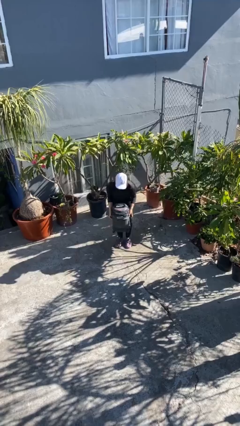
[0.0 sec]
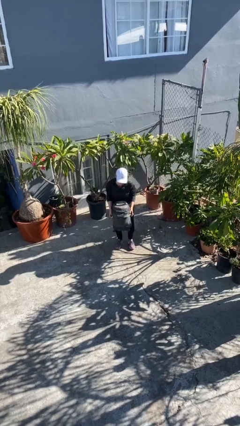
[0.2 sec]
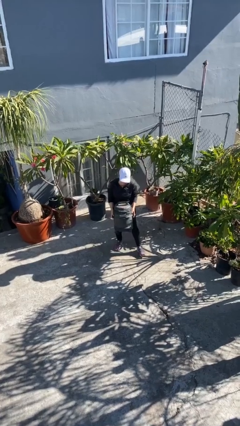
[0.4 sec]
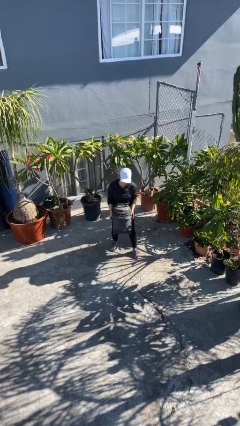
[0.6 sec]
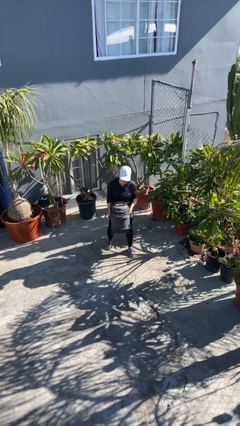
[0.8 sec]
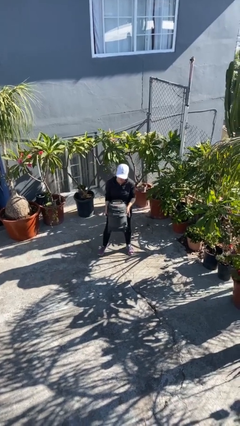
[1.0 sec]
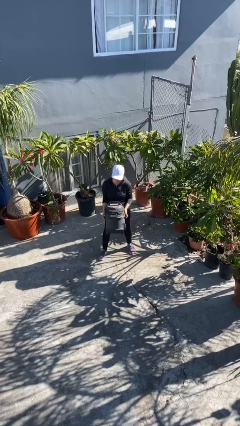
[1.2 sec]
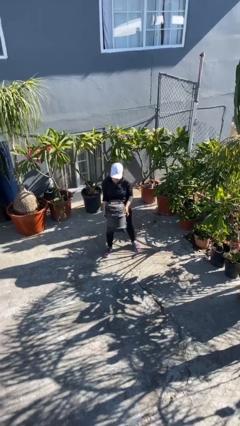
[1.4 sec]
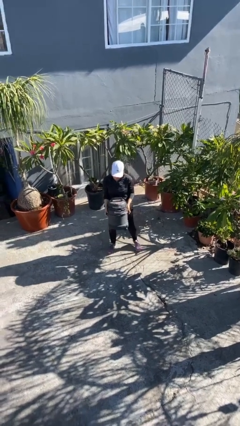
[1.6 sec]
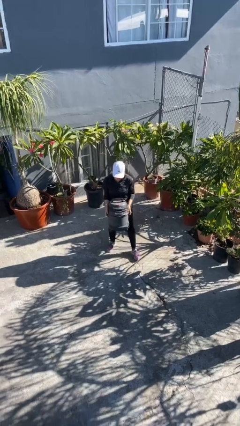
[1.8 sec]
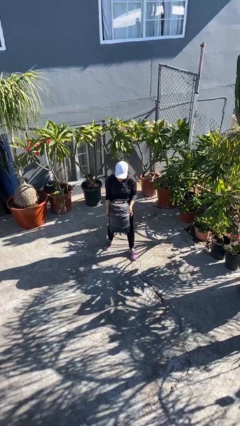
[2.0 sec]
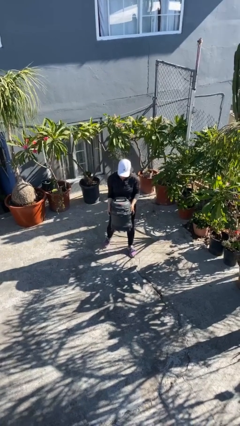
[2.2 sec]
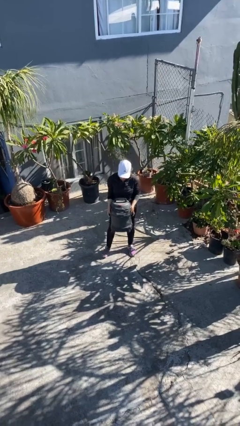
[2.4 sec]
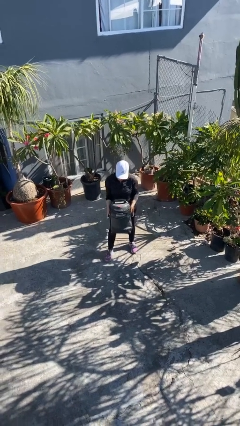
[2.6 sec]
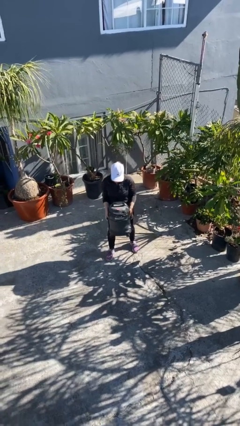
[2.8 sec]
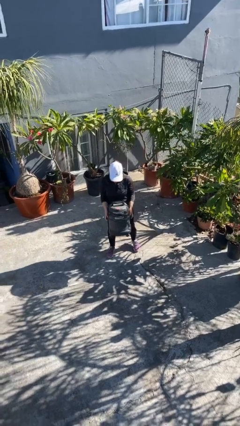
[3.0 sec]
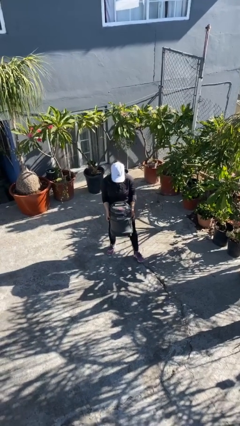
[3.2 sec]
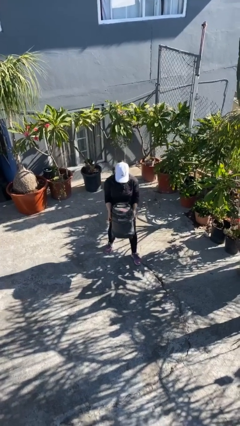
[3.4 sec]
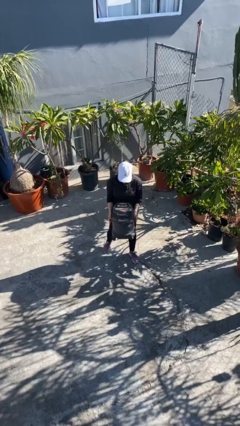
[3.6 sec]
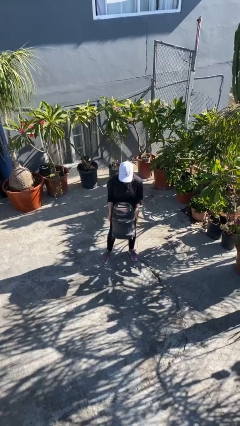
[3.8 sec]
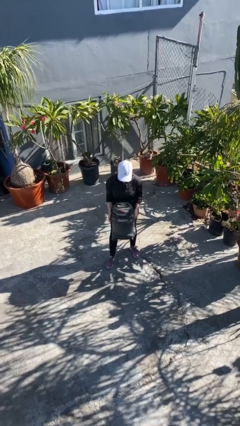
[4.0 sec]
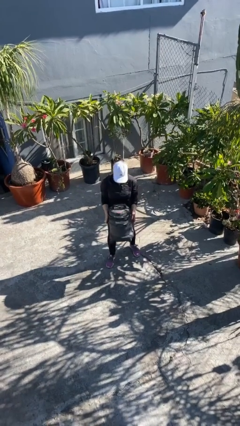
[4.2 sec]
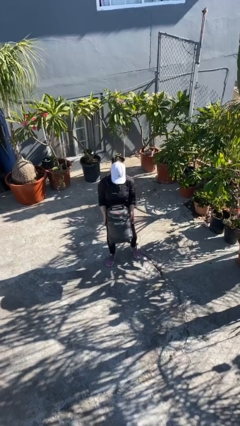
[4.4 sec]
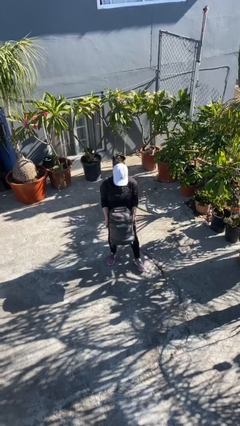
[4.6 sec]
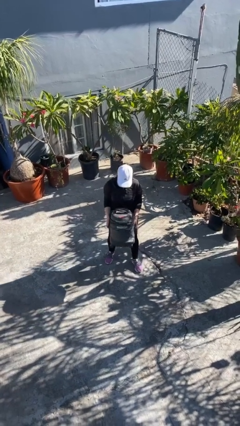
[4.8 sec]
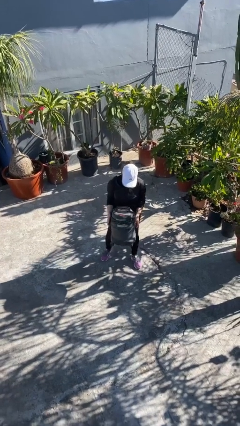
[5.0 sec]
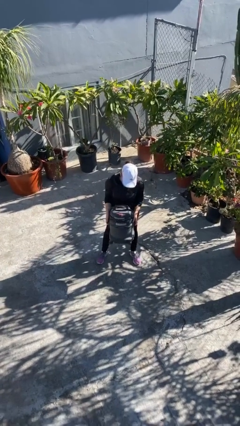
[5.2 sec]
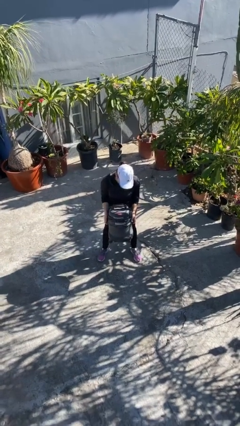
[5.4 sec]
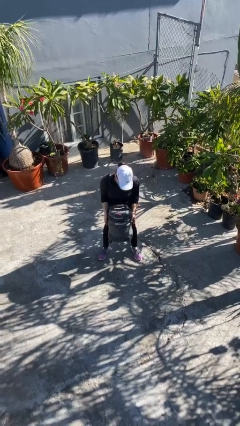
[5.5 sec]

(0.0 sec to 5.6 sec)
person carries heavy object

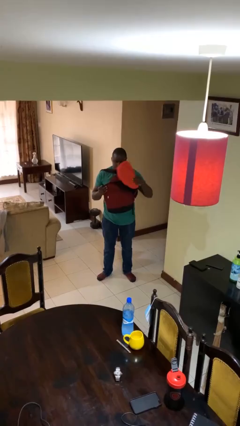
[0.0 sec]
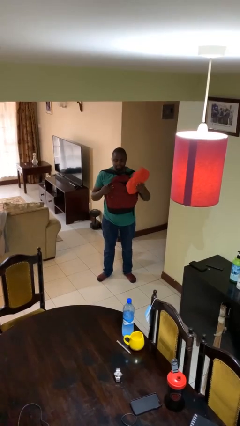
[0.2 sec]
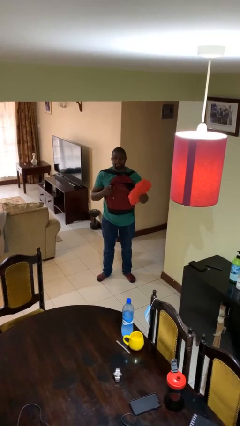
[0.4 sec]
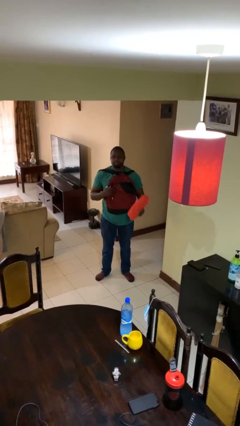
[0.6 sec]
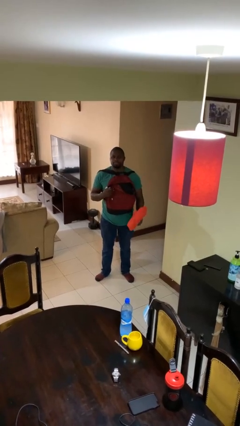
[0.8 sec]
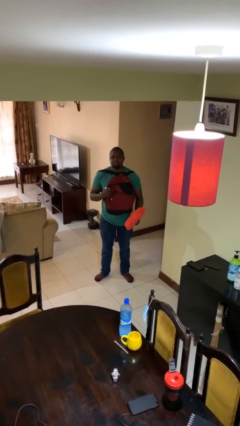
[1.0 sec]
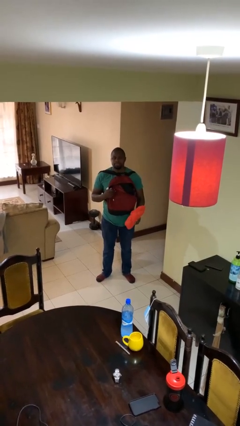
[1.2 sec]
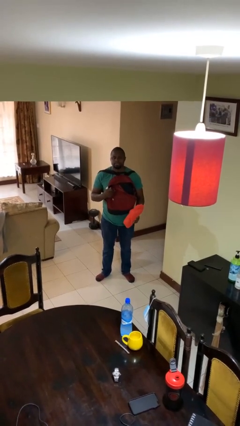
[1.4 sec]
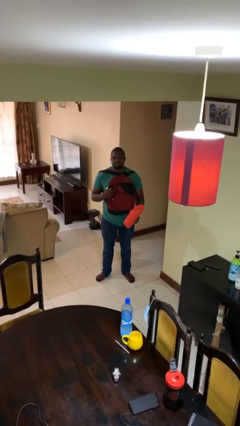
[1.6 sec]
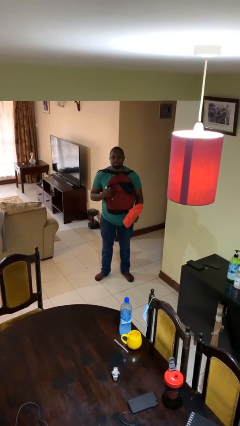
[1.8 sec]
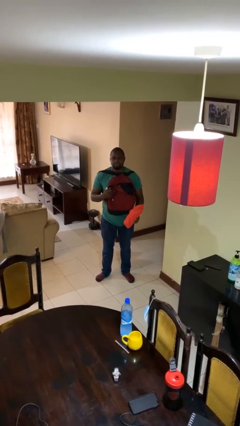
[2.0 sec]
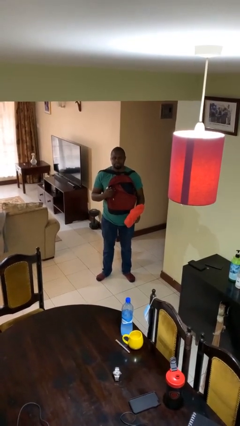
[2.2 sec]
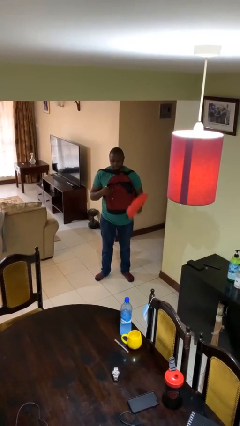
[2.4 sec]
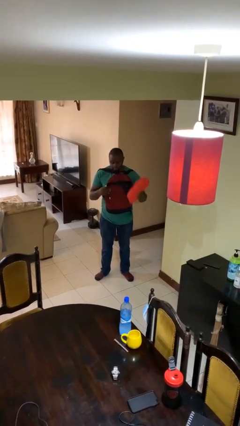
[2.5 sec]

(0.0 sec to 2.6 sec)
person takes object from backpack

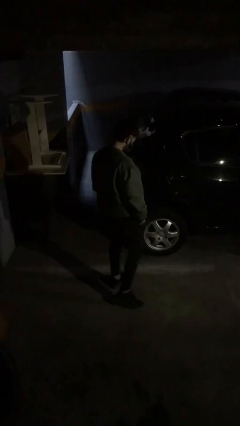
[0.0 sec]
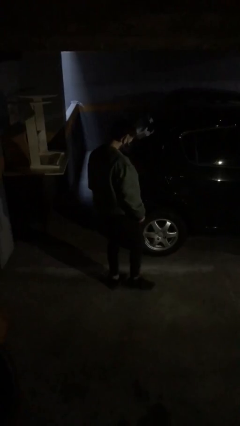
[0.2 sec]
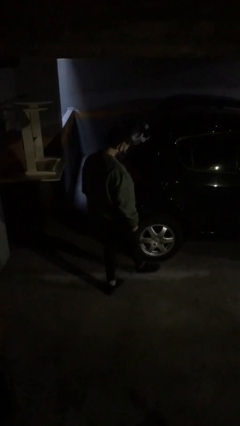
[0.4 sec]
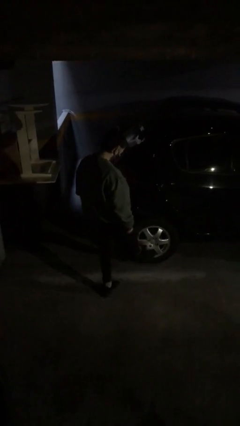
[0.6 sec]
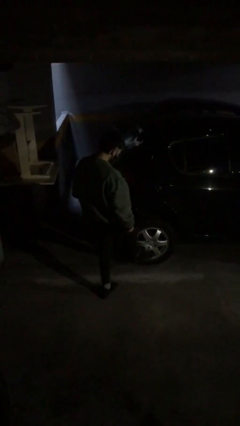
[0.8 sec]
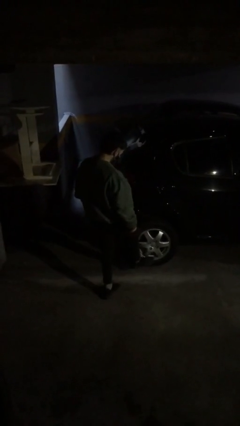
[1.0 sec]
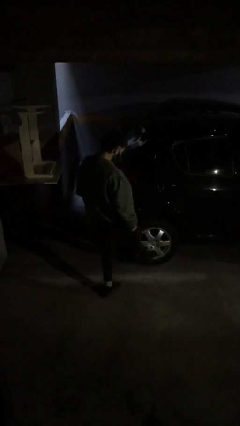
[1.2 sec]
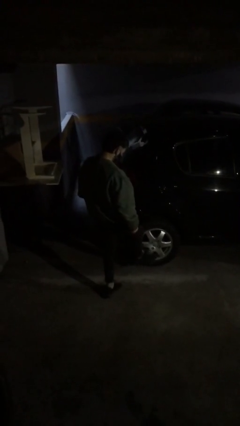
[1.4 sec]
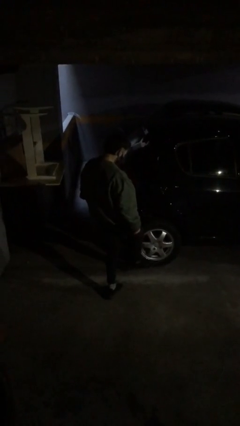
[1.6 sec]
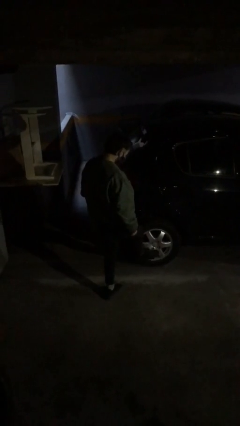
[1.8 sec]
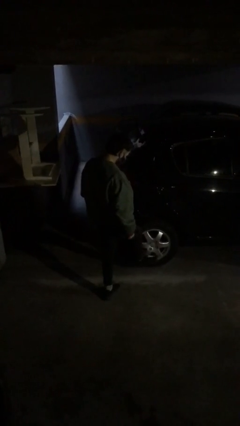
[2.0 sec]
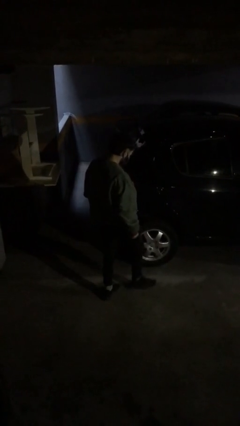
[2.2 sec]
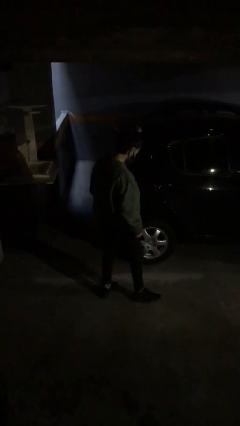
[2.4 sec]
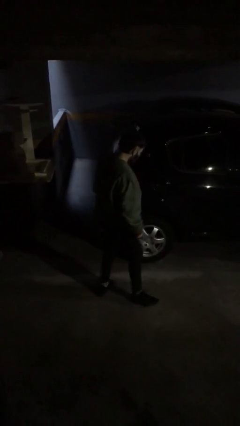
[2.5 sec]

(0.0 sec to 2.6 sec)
person kicks car tires

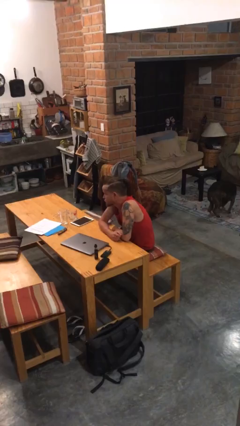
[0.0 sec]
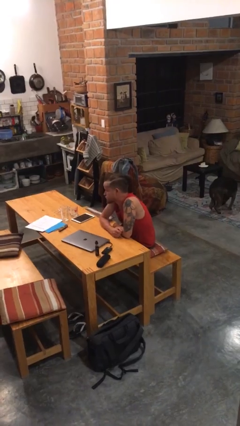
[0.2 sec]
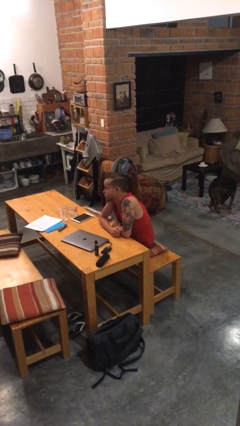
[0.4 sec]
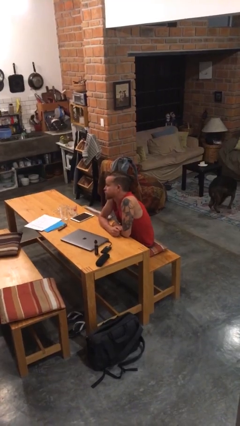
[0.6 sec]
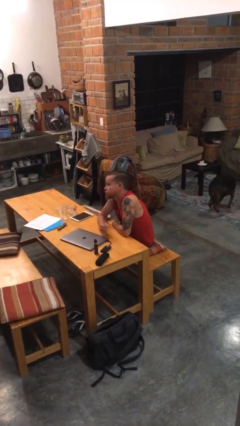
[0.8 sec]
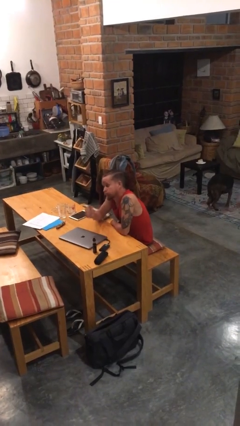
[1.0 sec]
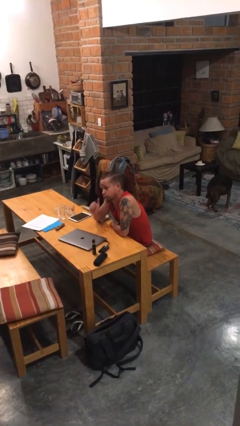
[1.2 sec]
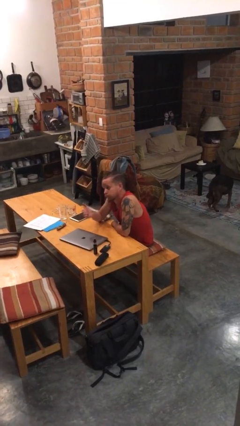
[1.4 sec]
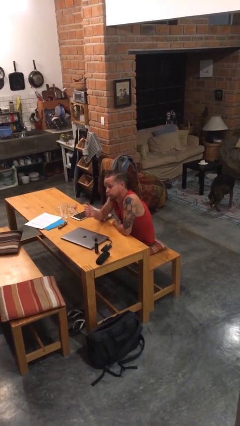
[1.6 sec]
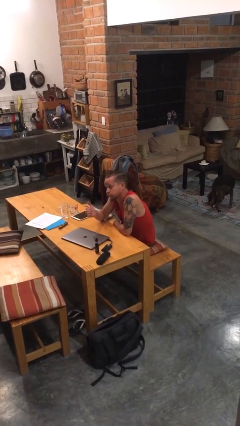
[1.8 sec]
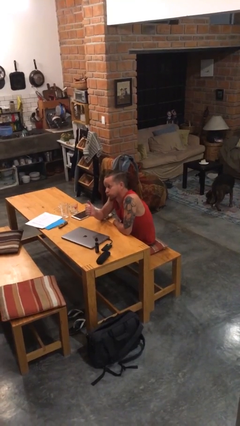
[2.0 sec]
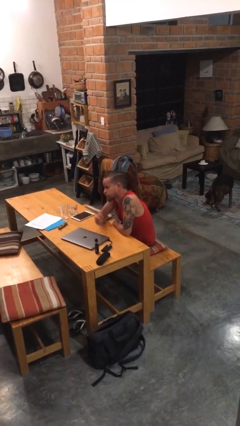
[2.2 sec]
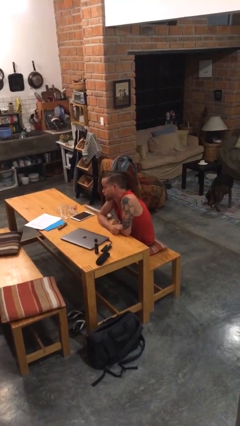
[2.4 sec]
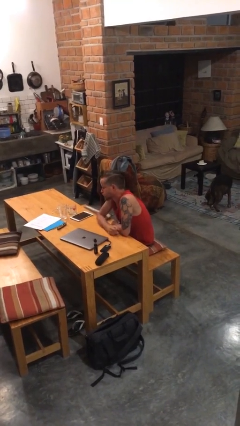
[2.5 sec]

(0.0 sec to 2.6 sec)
person gestures thumbs up

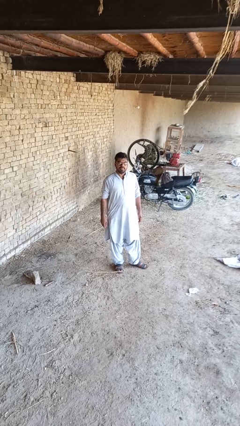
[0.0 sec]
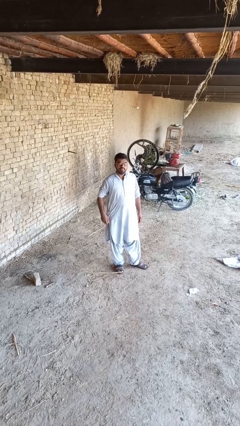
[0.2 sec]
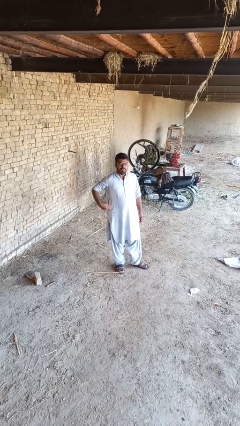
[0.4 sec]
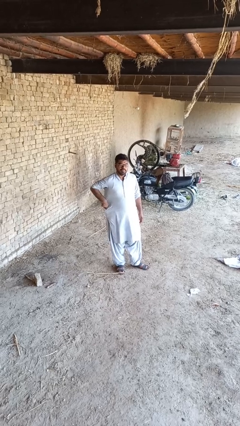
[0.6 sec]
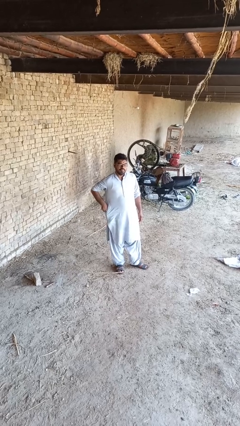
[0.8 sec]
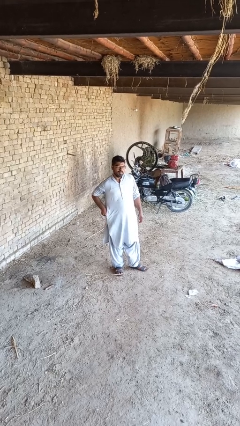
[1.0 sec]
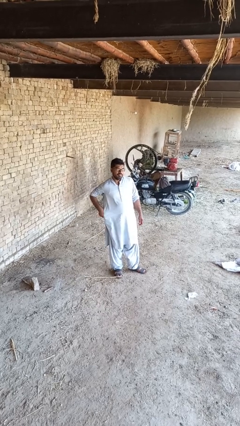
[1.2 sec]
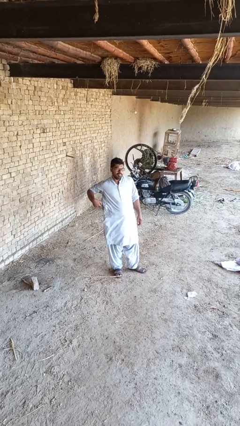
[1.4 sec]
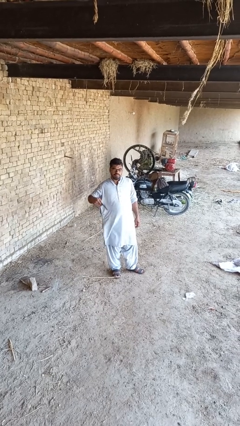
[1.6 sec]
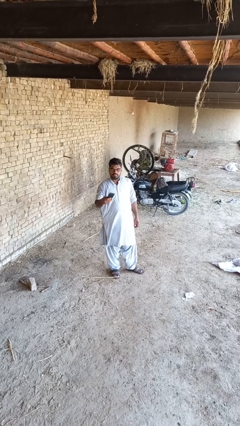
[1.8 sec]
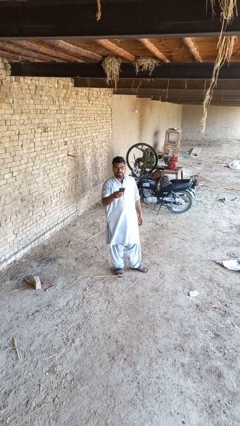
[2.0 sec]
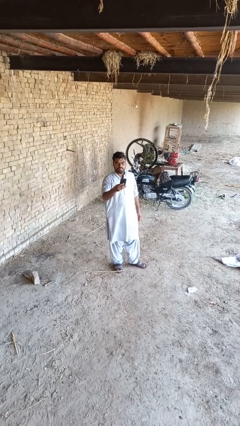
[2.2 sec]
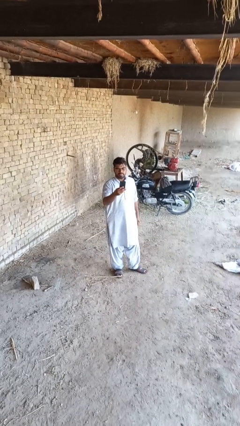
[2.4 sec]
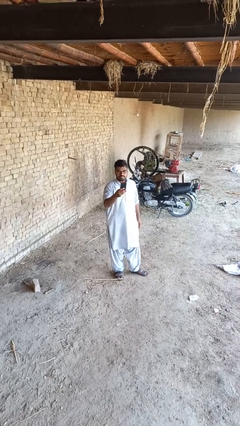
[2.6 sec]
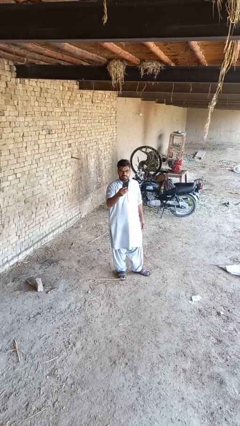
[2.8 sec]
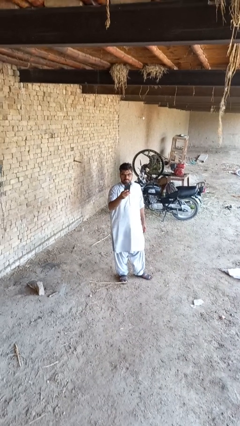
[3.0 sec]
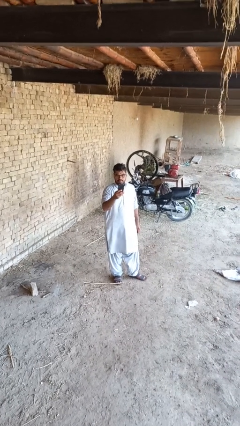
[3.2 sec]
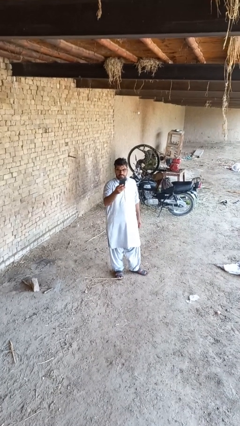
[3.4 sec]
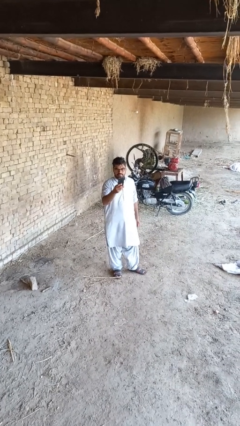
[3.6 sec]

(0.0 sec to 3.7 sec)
person takes phone from pocket

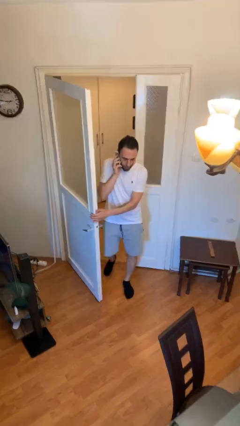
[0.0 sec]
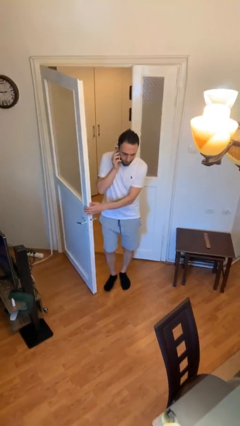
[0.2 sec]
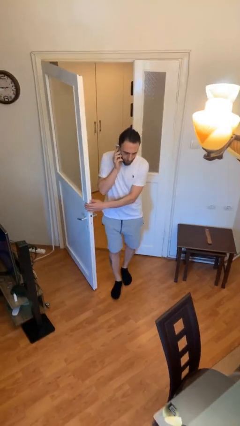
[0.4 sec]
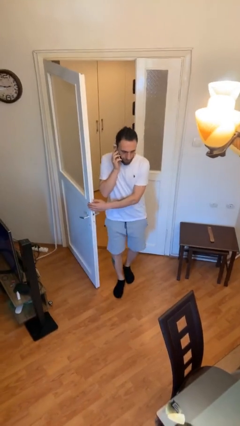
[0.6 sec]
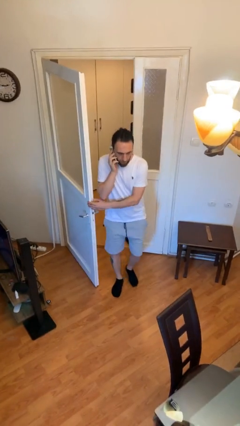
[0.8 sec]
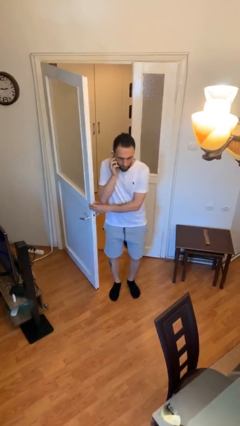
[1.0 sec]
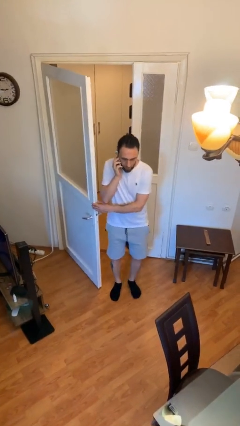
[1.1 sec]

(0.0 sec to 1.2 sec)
person enters scene through structure
